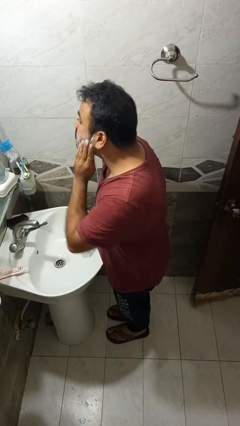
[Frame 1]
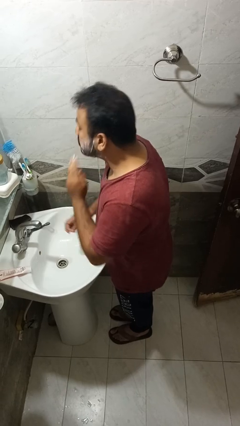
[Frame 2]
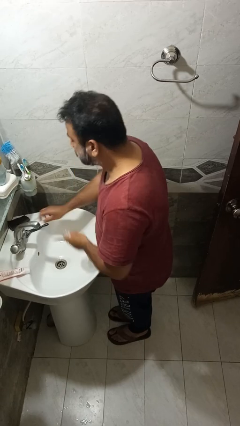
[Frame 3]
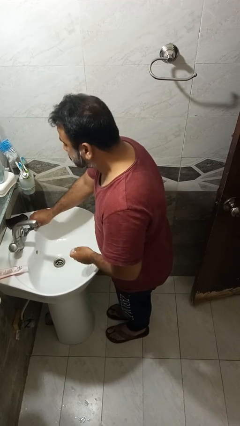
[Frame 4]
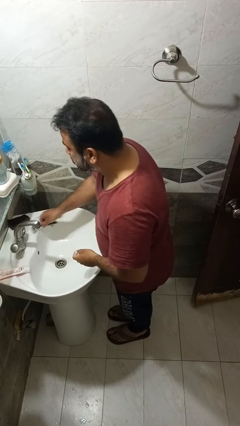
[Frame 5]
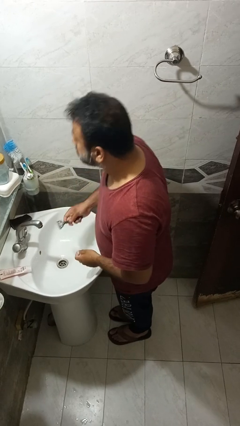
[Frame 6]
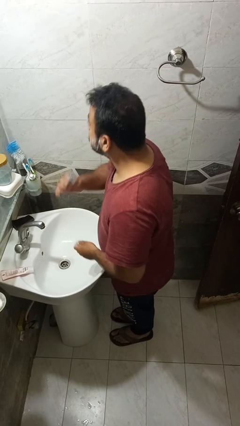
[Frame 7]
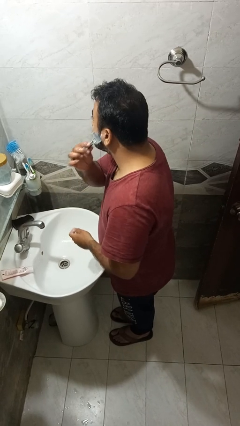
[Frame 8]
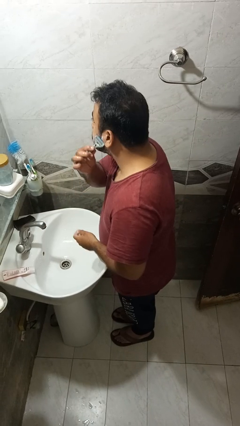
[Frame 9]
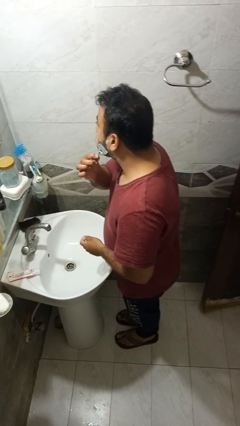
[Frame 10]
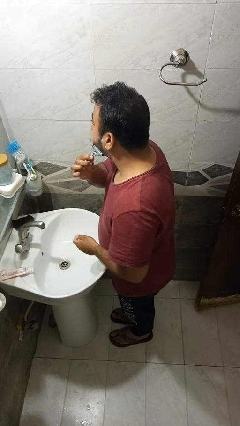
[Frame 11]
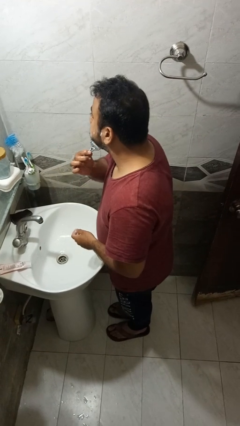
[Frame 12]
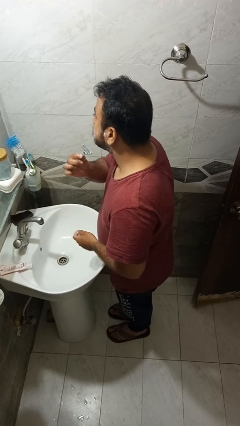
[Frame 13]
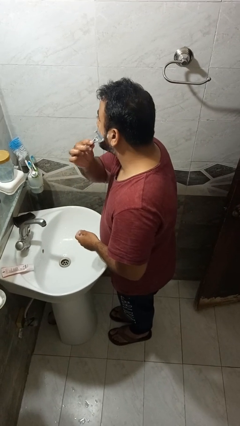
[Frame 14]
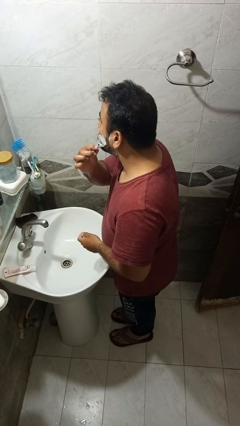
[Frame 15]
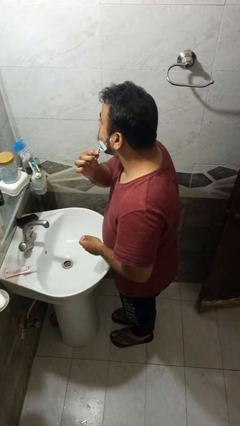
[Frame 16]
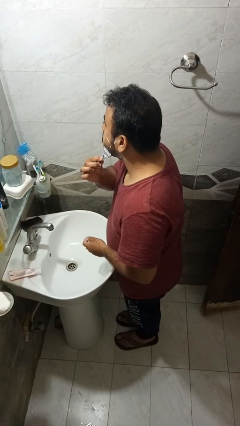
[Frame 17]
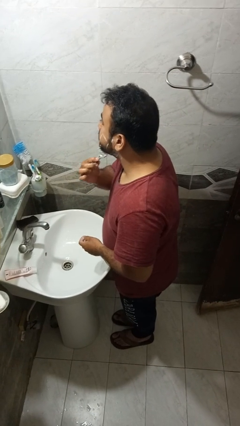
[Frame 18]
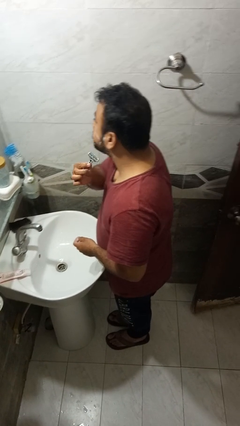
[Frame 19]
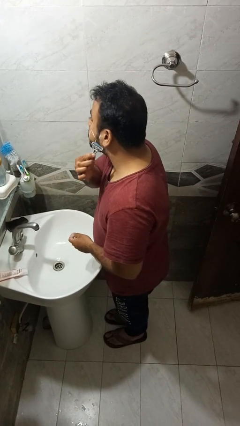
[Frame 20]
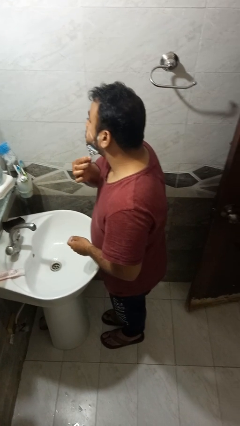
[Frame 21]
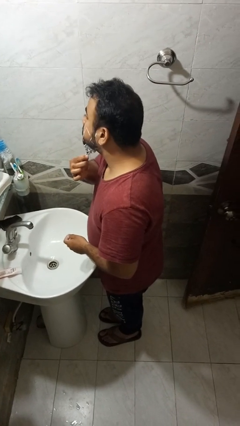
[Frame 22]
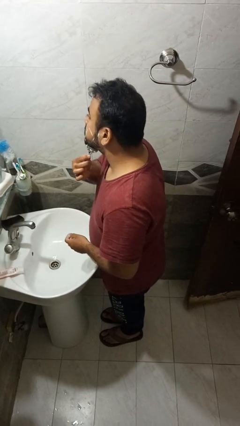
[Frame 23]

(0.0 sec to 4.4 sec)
person shaves face

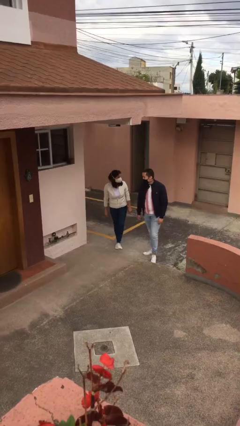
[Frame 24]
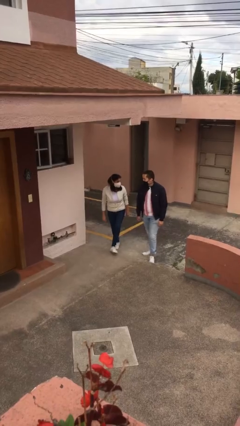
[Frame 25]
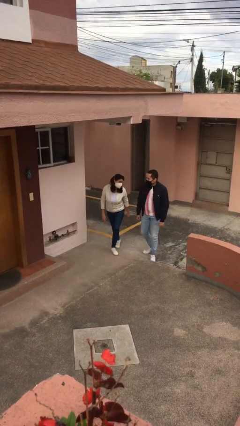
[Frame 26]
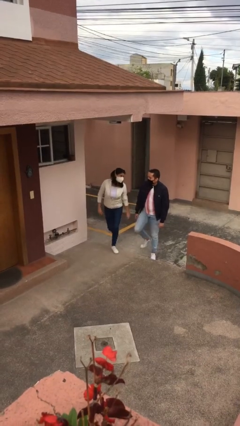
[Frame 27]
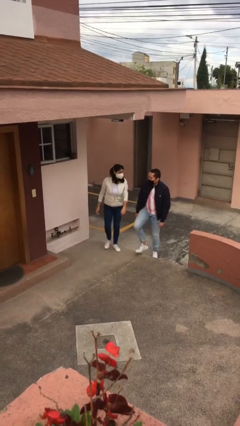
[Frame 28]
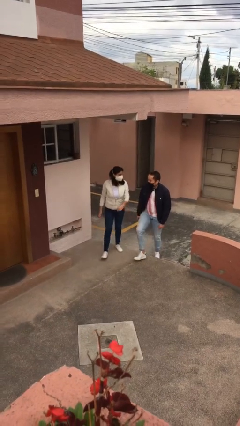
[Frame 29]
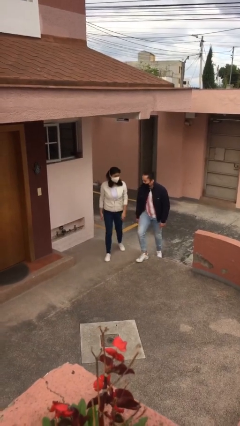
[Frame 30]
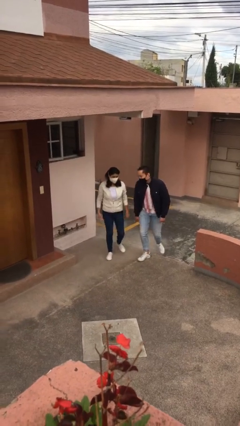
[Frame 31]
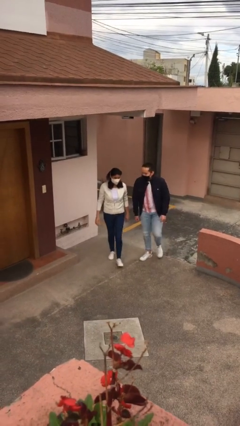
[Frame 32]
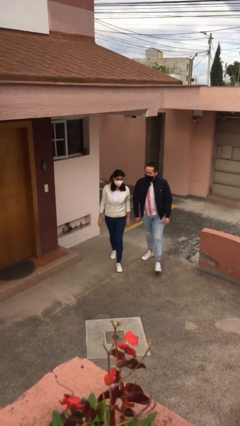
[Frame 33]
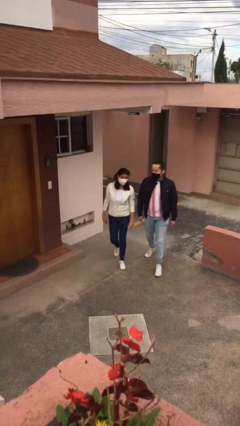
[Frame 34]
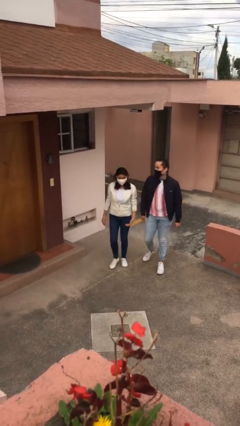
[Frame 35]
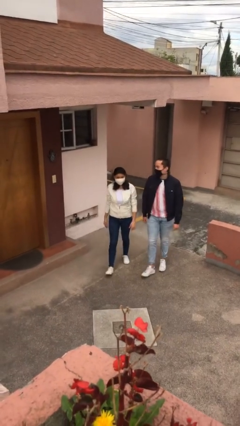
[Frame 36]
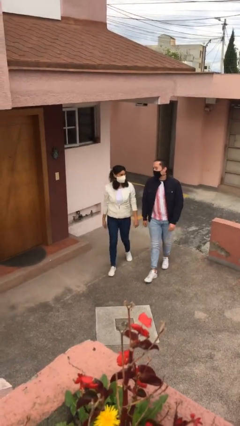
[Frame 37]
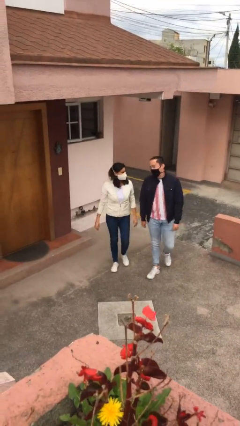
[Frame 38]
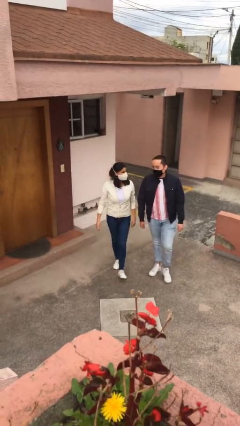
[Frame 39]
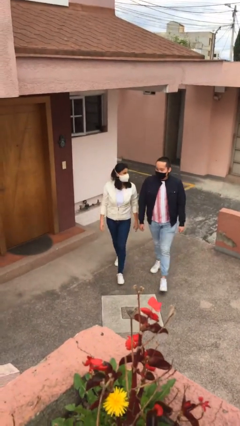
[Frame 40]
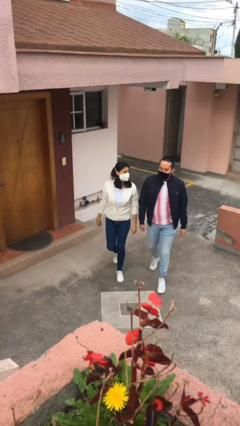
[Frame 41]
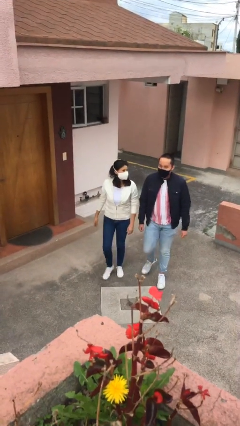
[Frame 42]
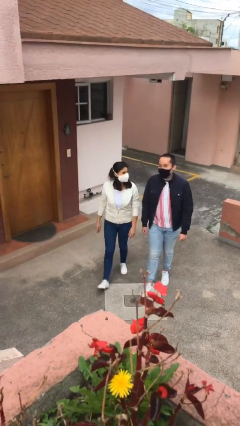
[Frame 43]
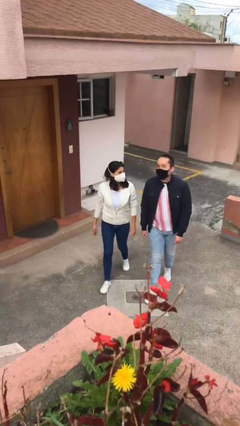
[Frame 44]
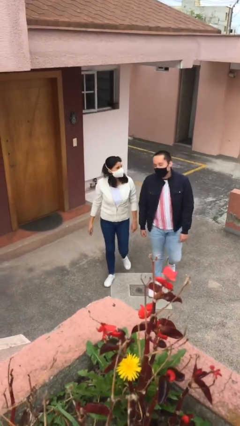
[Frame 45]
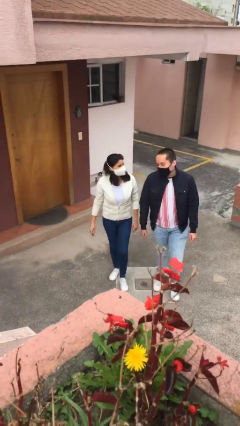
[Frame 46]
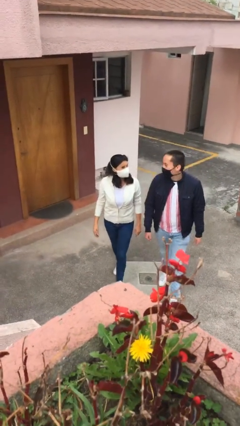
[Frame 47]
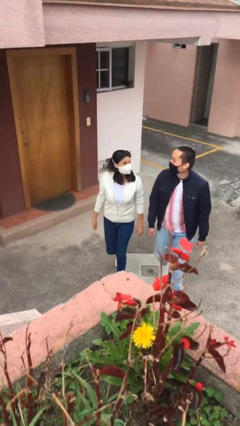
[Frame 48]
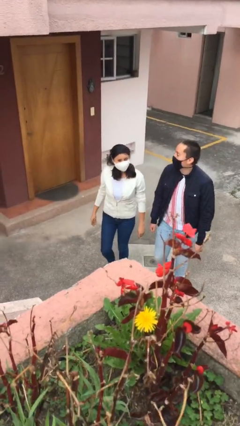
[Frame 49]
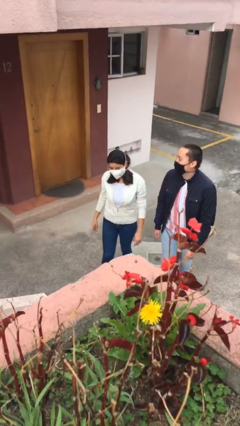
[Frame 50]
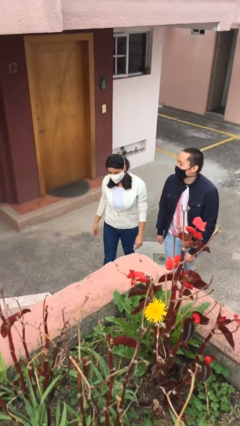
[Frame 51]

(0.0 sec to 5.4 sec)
person talks to person

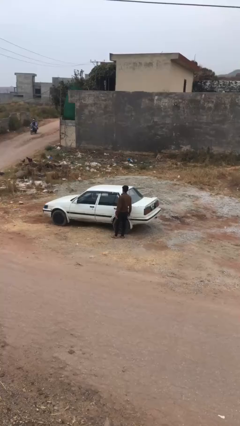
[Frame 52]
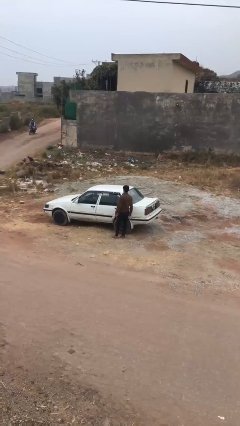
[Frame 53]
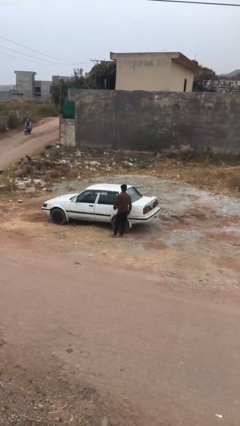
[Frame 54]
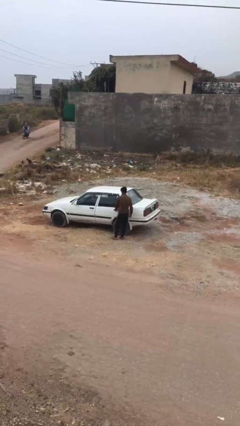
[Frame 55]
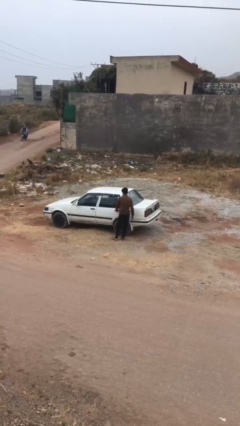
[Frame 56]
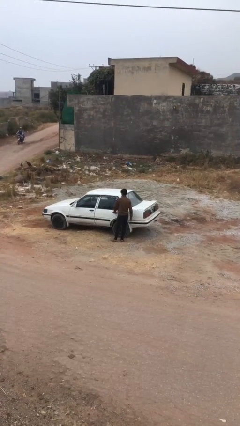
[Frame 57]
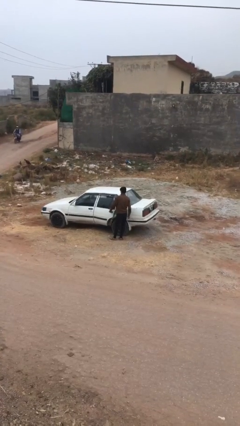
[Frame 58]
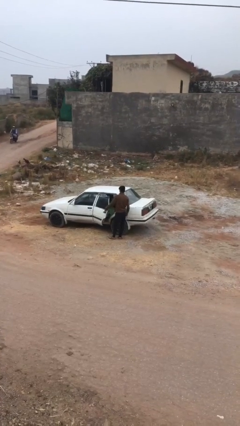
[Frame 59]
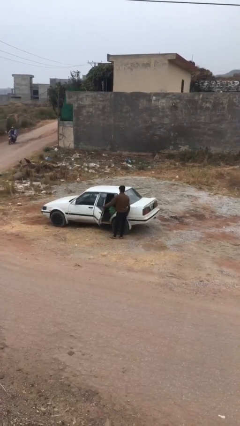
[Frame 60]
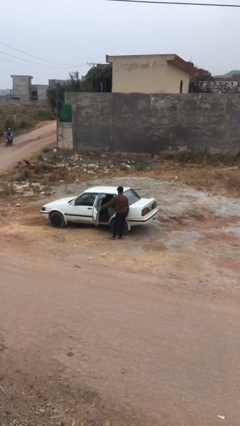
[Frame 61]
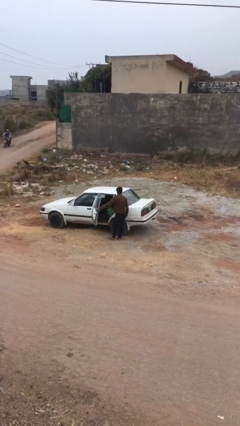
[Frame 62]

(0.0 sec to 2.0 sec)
person opens car door

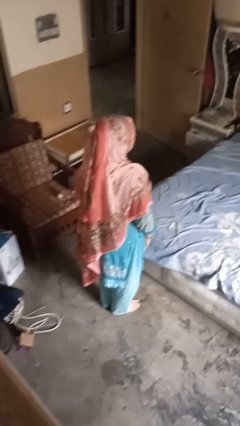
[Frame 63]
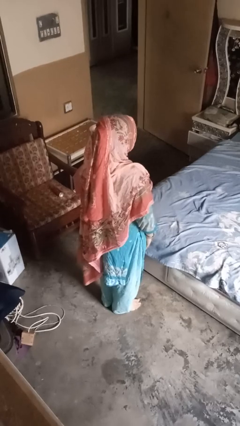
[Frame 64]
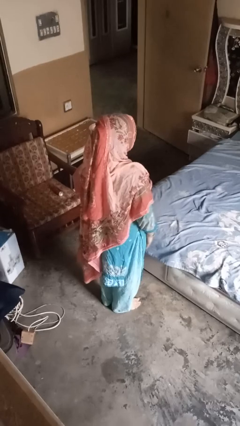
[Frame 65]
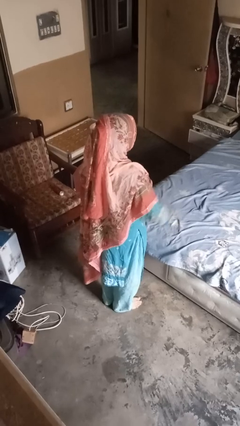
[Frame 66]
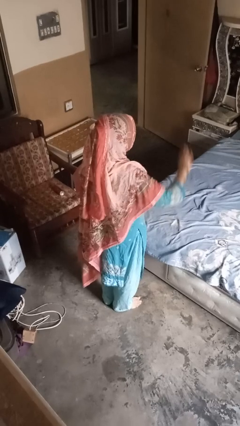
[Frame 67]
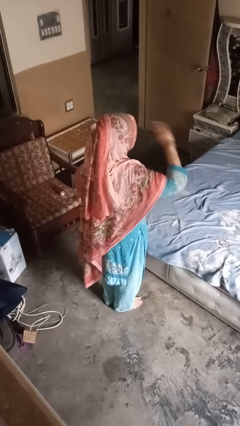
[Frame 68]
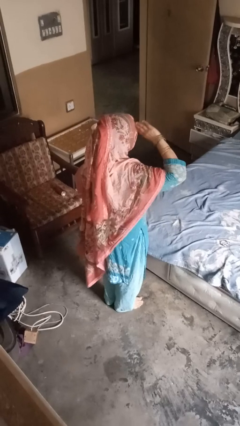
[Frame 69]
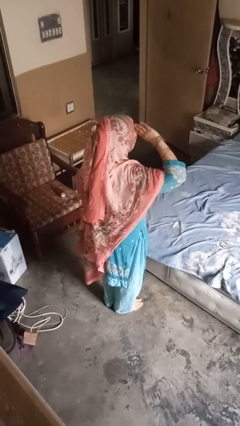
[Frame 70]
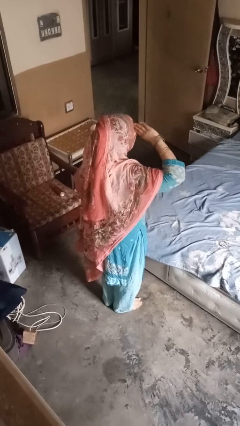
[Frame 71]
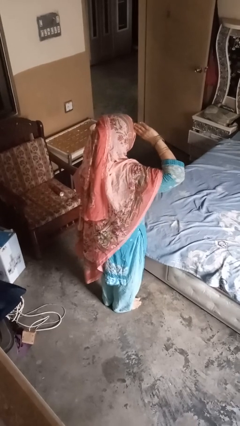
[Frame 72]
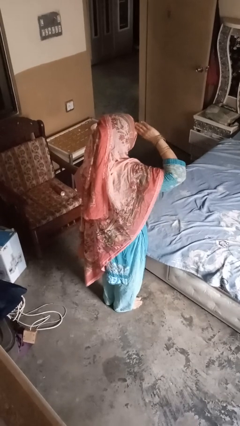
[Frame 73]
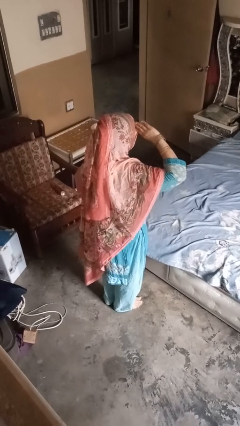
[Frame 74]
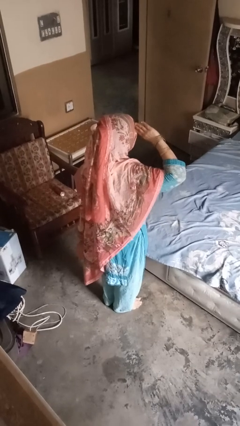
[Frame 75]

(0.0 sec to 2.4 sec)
person salutes

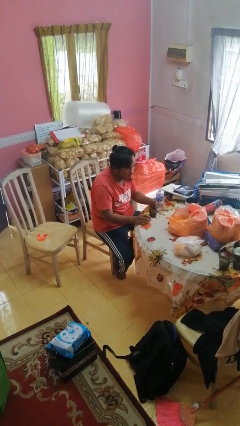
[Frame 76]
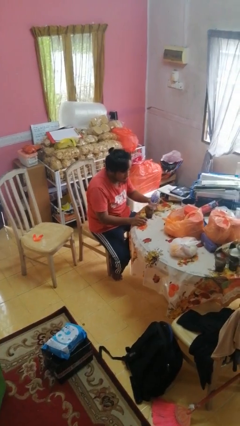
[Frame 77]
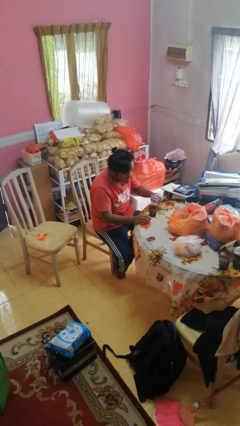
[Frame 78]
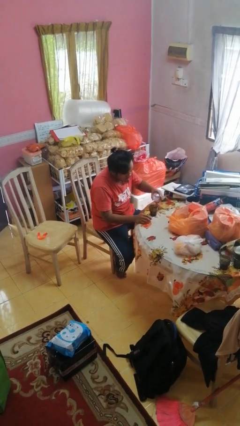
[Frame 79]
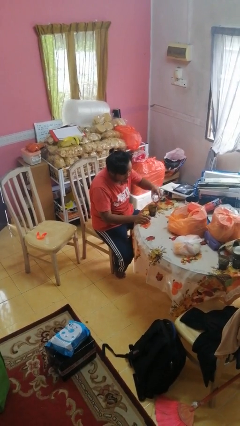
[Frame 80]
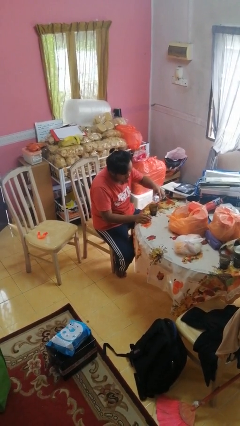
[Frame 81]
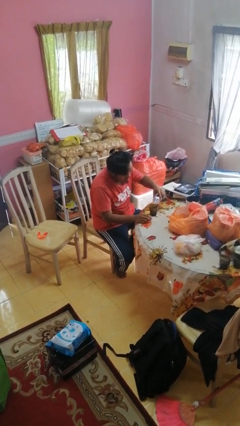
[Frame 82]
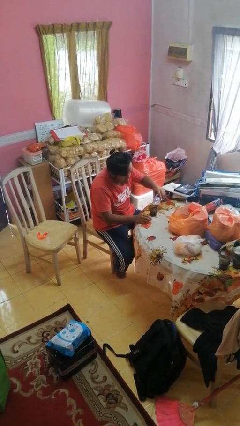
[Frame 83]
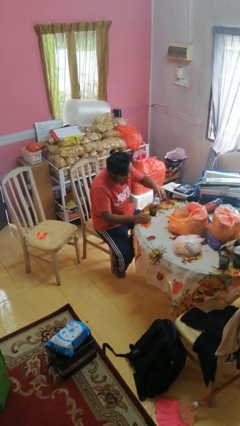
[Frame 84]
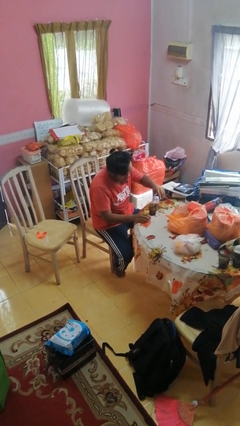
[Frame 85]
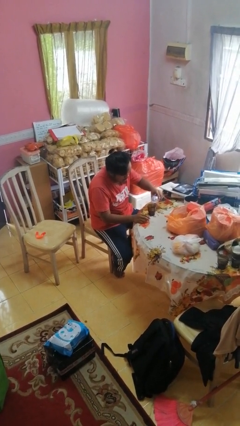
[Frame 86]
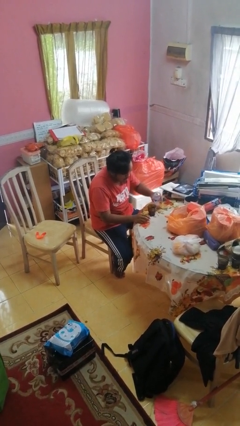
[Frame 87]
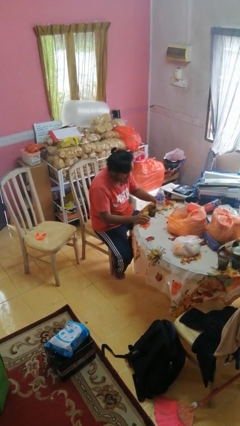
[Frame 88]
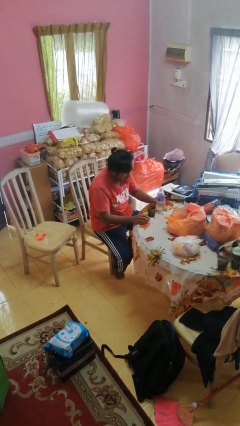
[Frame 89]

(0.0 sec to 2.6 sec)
person pours liquid into cup

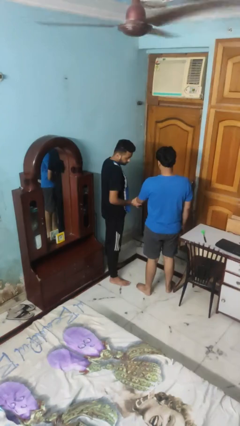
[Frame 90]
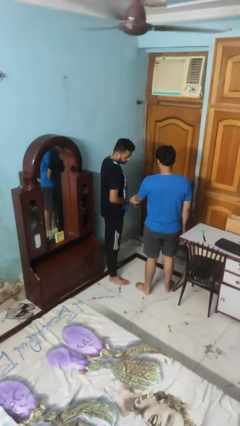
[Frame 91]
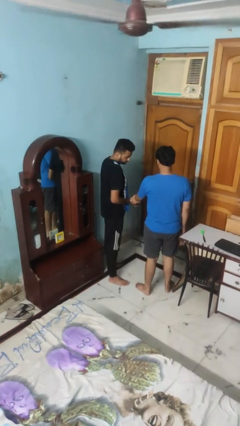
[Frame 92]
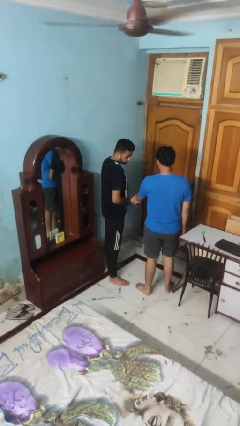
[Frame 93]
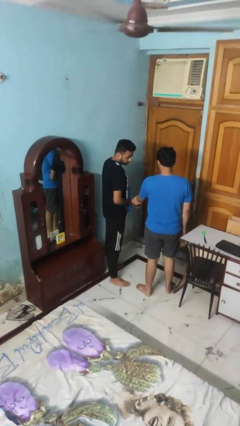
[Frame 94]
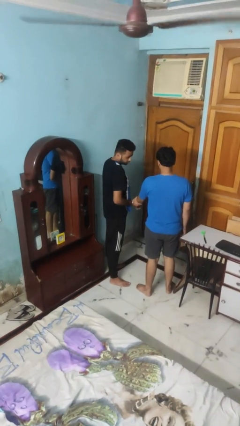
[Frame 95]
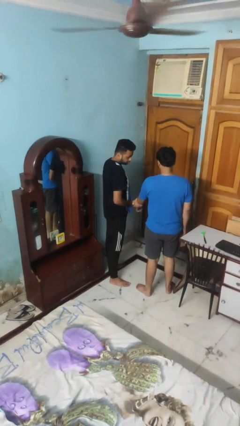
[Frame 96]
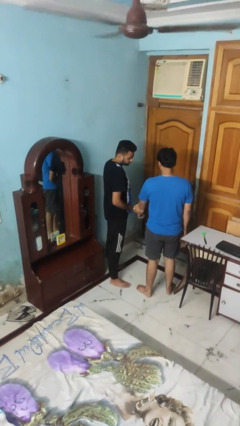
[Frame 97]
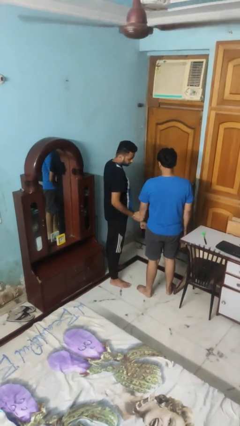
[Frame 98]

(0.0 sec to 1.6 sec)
person grabs person by forearm
